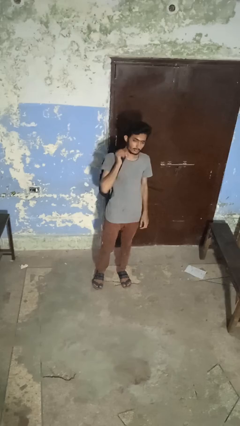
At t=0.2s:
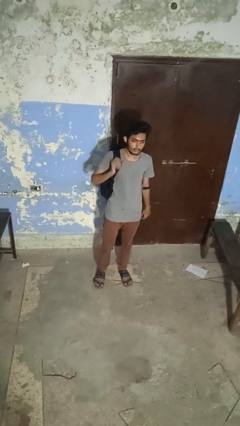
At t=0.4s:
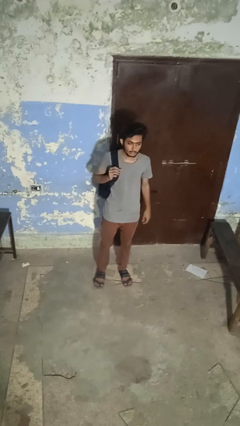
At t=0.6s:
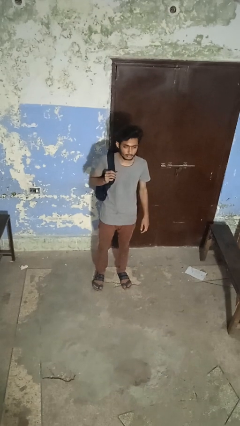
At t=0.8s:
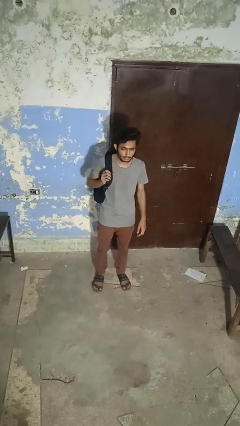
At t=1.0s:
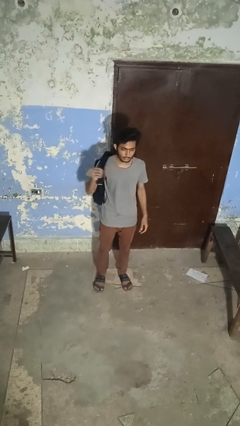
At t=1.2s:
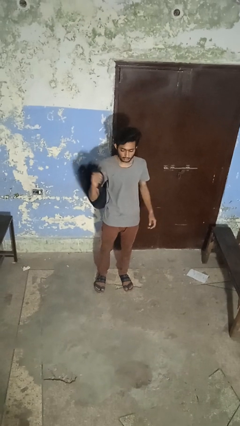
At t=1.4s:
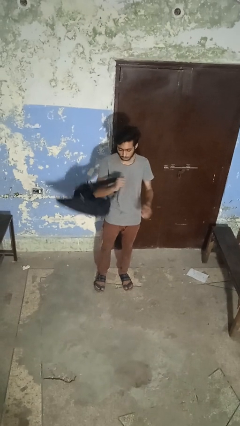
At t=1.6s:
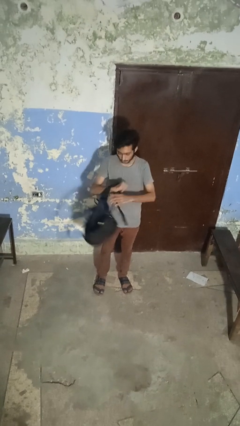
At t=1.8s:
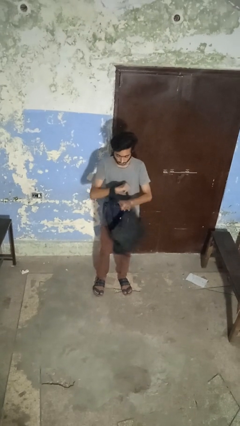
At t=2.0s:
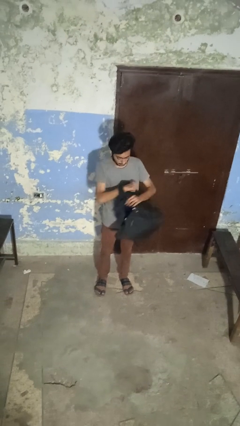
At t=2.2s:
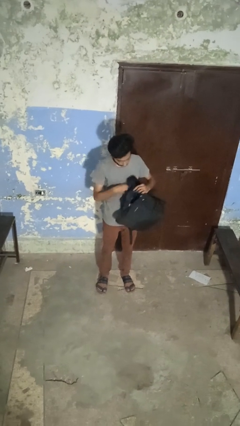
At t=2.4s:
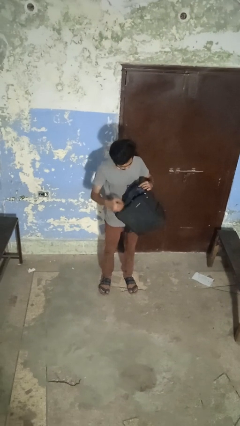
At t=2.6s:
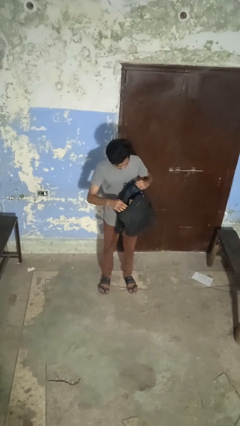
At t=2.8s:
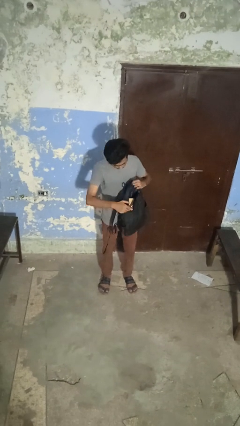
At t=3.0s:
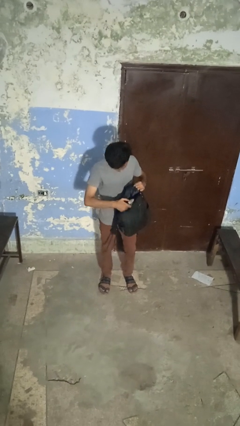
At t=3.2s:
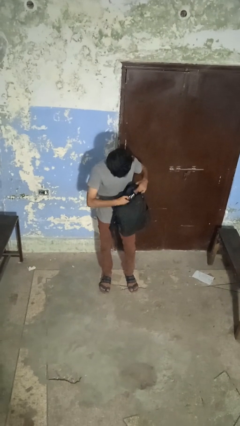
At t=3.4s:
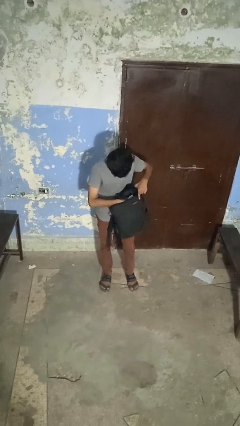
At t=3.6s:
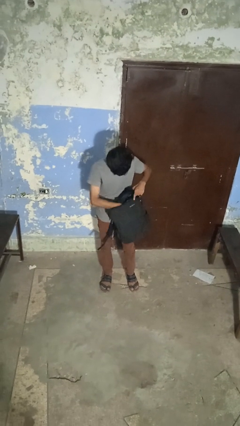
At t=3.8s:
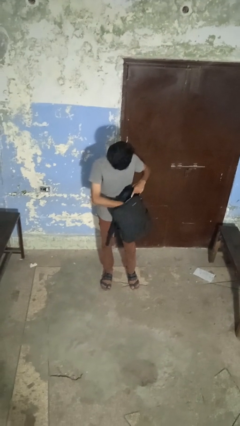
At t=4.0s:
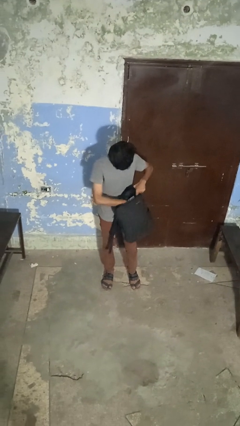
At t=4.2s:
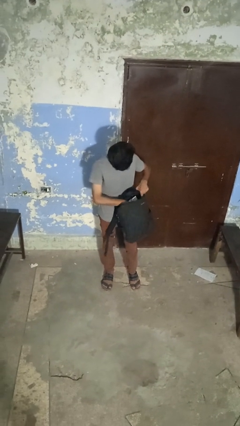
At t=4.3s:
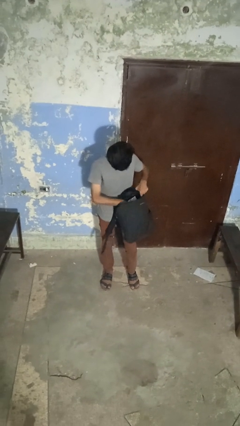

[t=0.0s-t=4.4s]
person searches in backpack

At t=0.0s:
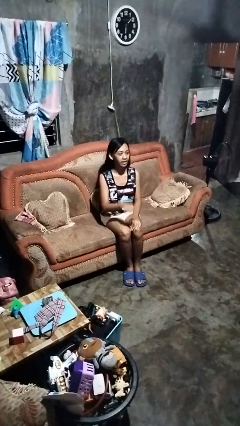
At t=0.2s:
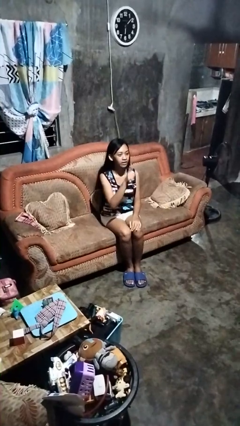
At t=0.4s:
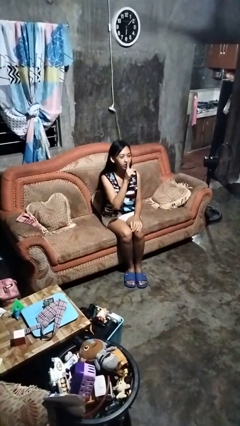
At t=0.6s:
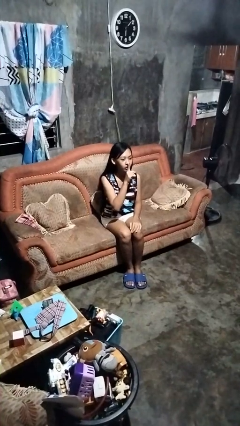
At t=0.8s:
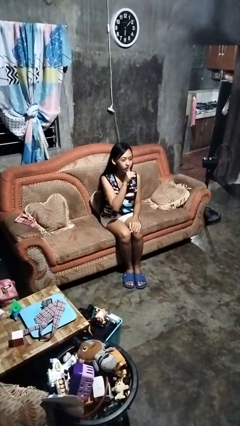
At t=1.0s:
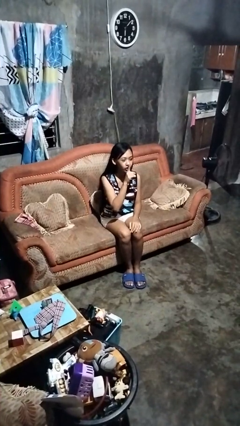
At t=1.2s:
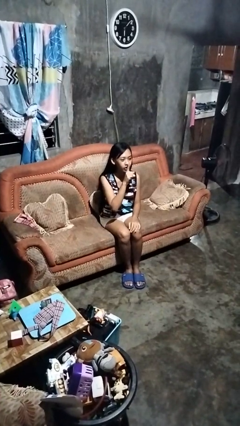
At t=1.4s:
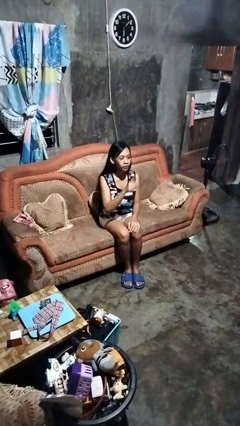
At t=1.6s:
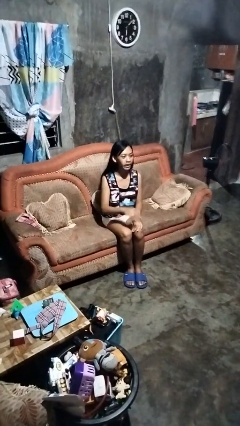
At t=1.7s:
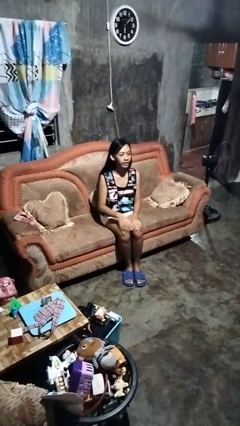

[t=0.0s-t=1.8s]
person gestures be quiet

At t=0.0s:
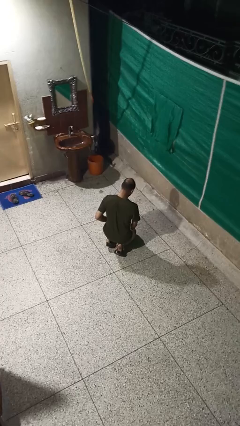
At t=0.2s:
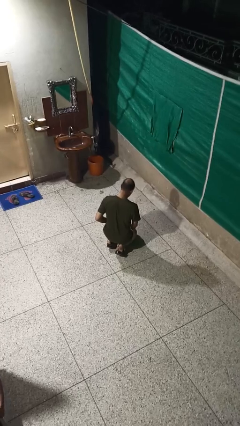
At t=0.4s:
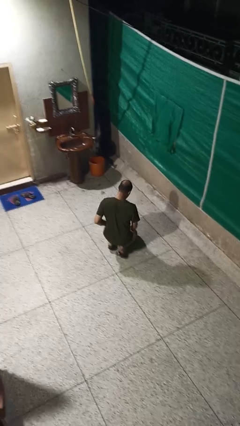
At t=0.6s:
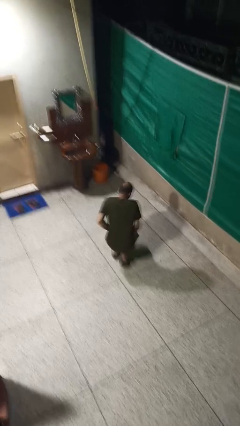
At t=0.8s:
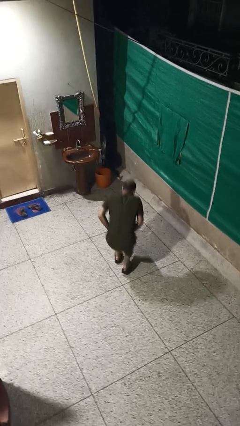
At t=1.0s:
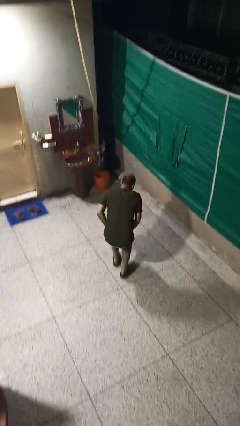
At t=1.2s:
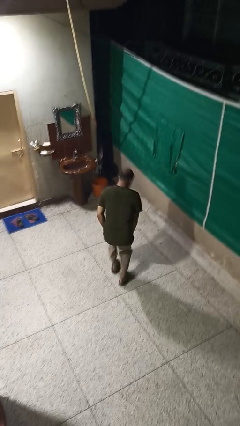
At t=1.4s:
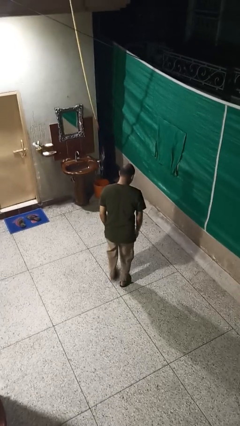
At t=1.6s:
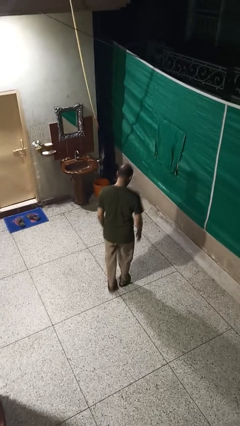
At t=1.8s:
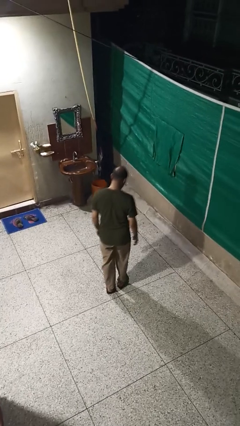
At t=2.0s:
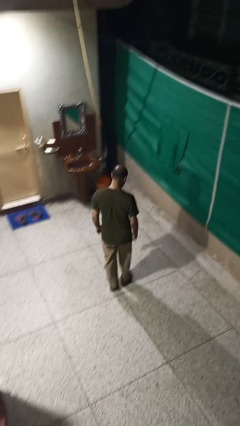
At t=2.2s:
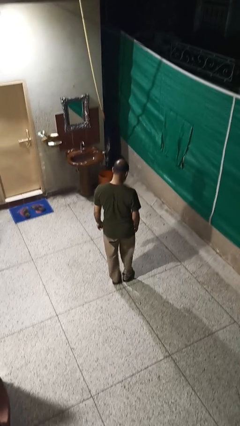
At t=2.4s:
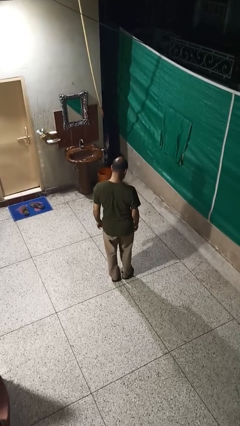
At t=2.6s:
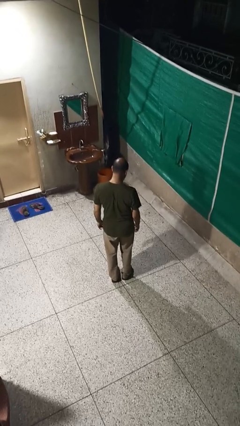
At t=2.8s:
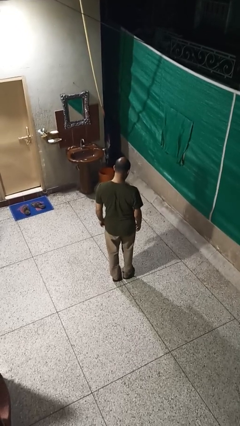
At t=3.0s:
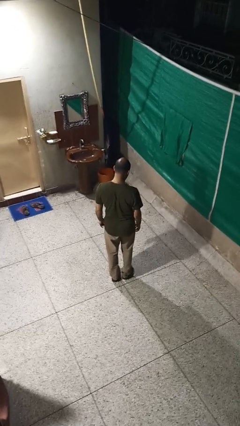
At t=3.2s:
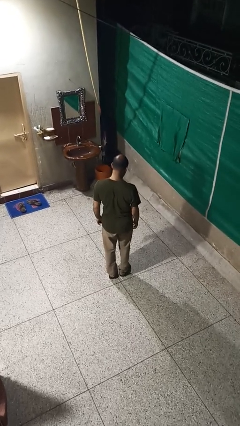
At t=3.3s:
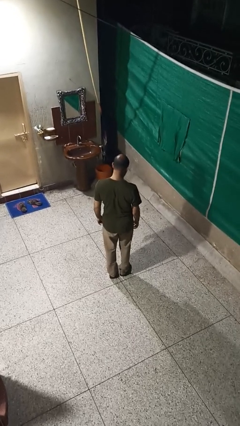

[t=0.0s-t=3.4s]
person stands up from floor

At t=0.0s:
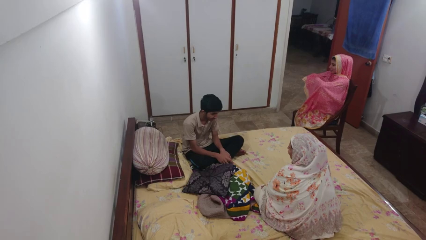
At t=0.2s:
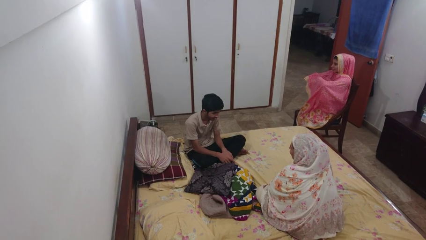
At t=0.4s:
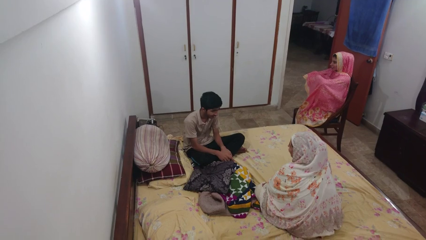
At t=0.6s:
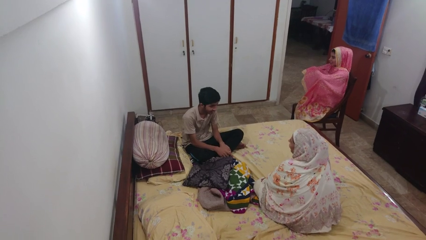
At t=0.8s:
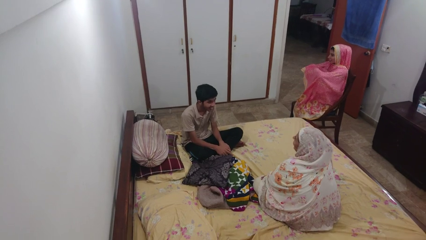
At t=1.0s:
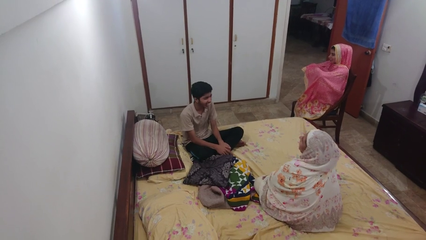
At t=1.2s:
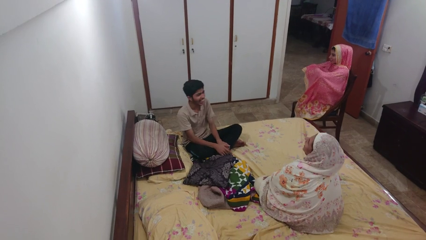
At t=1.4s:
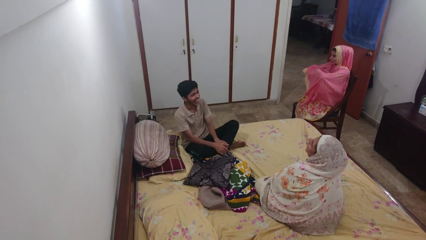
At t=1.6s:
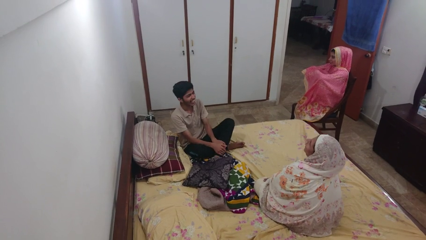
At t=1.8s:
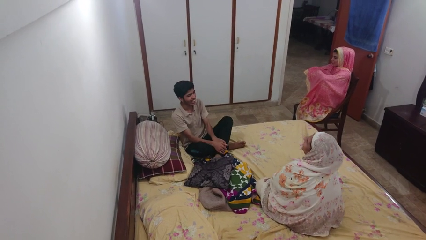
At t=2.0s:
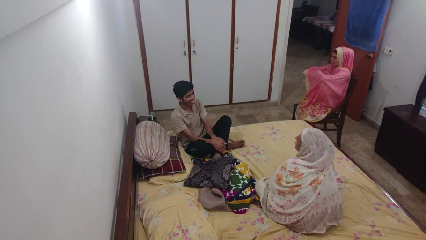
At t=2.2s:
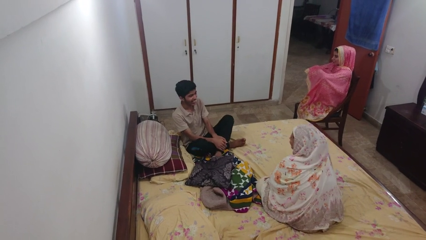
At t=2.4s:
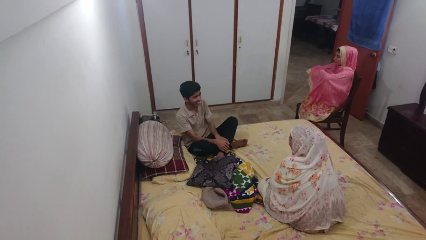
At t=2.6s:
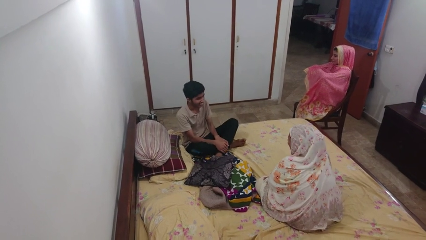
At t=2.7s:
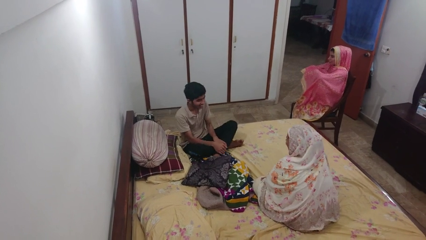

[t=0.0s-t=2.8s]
person laughs with person

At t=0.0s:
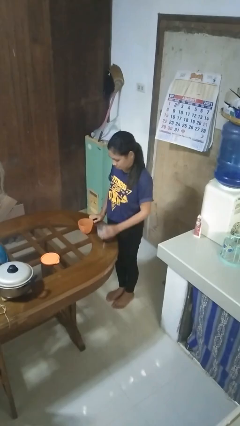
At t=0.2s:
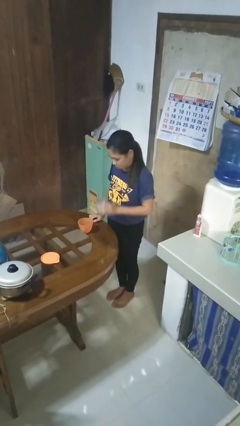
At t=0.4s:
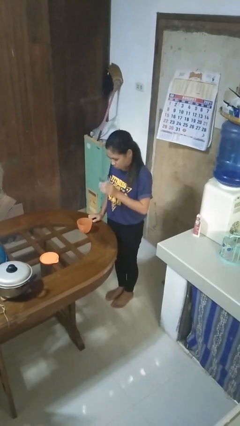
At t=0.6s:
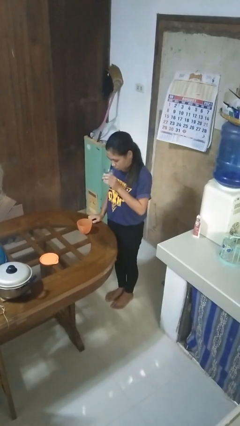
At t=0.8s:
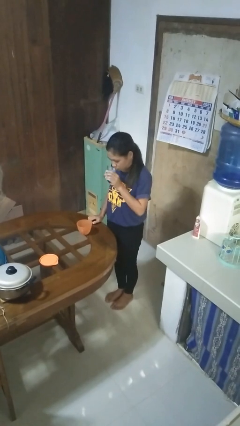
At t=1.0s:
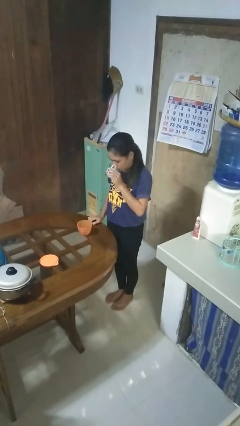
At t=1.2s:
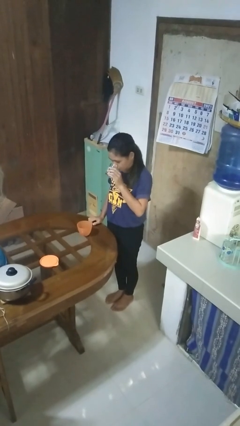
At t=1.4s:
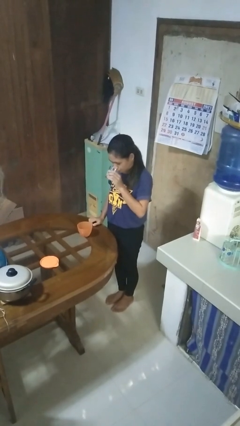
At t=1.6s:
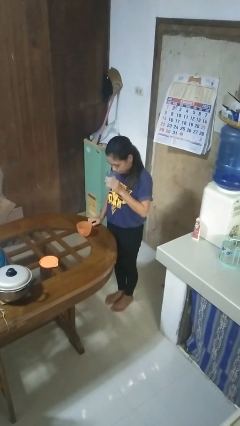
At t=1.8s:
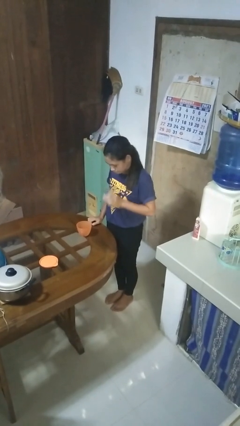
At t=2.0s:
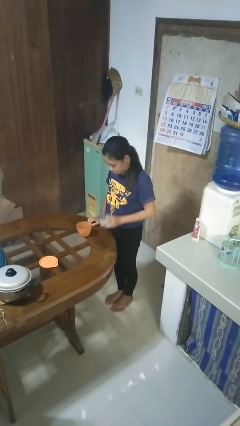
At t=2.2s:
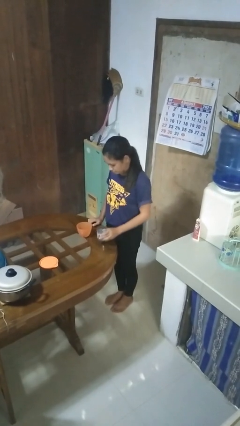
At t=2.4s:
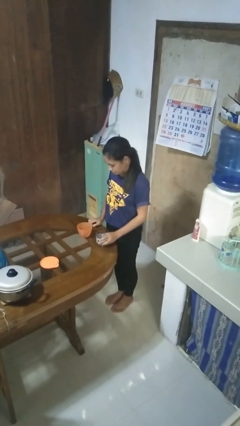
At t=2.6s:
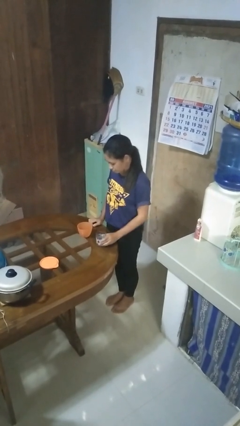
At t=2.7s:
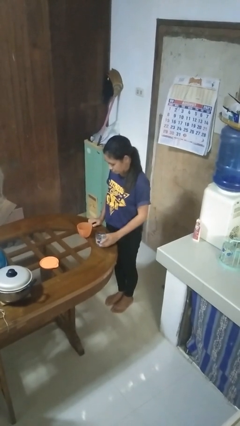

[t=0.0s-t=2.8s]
person drinks from cup

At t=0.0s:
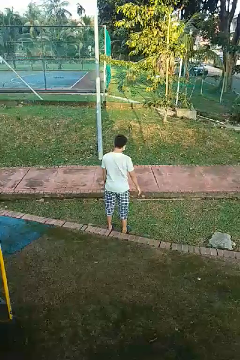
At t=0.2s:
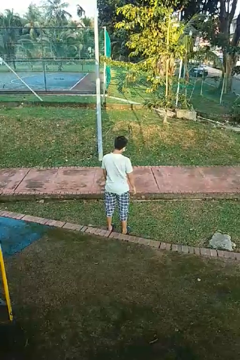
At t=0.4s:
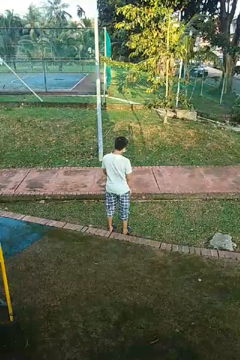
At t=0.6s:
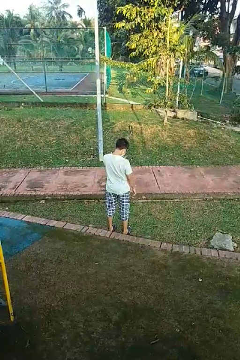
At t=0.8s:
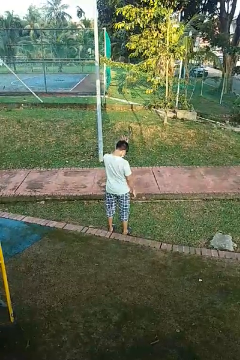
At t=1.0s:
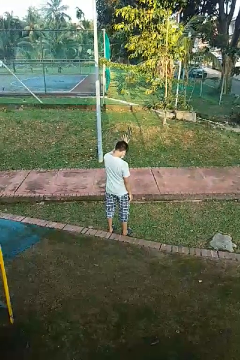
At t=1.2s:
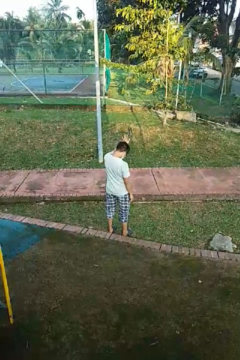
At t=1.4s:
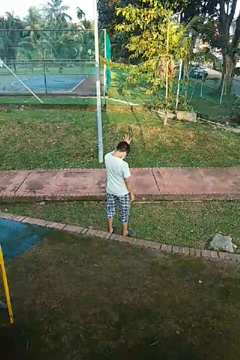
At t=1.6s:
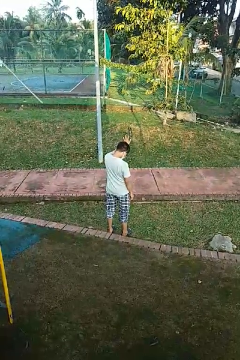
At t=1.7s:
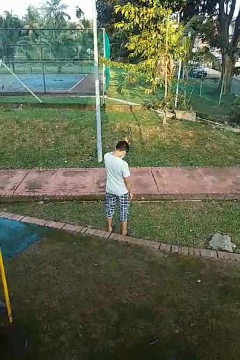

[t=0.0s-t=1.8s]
person gestures stop

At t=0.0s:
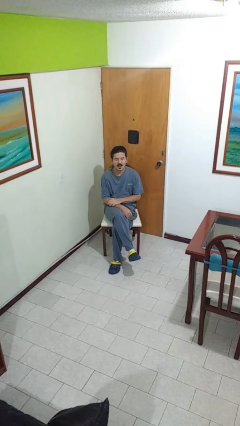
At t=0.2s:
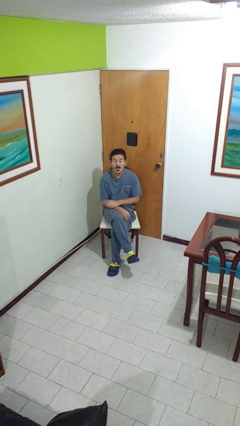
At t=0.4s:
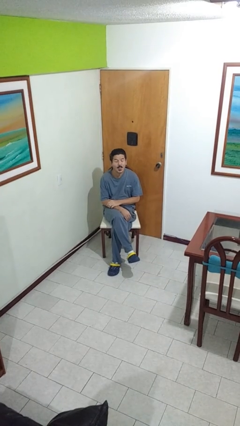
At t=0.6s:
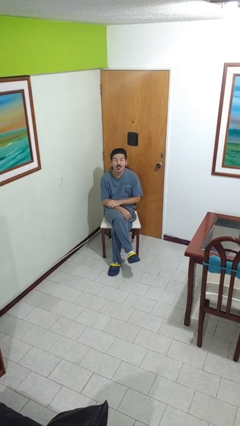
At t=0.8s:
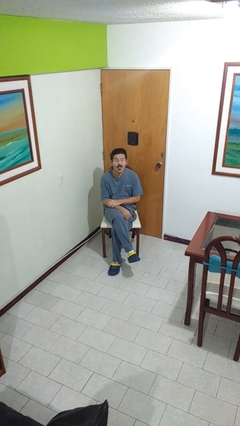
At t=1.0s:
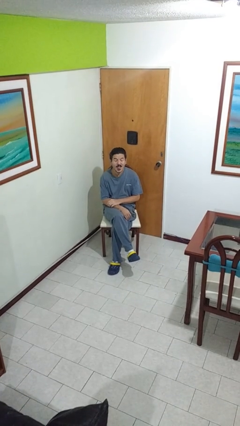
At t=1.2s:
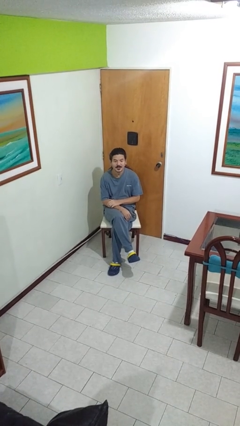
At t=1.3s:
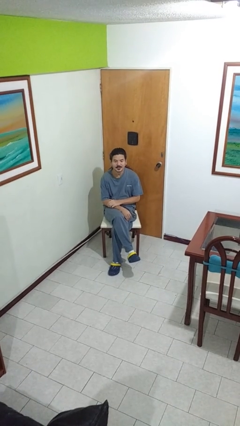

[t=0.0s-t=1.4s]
person sticks out tongue
